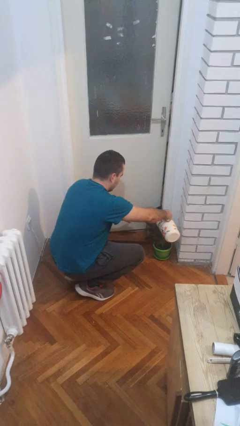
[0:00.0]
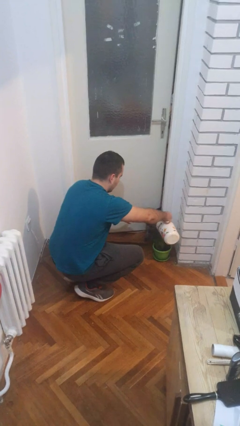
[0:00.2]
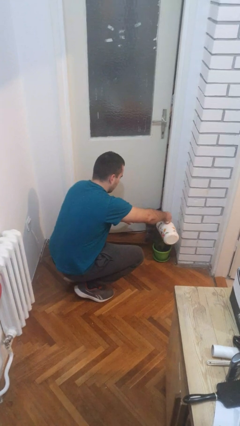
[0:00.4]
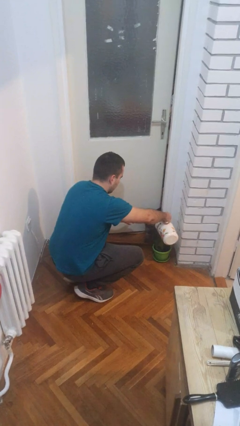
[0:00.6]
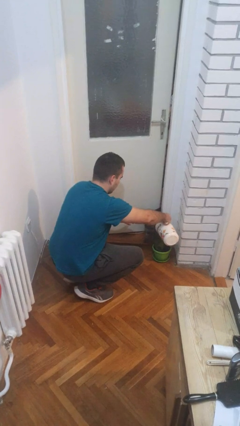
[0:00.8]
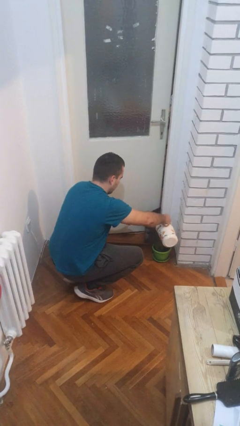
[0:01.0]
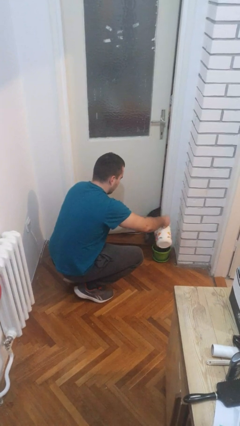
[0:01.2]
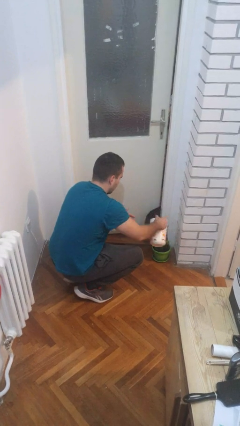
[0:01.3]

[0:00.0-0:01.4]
person waters houseplant

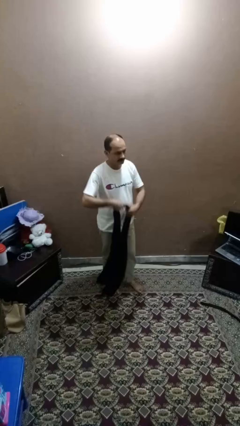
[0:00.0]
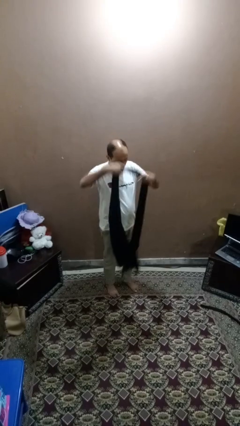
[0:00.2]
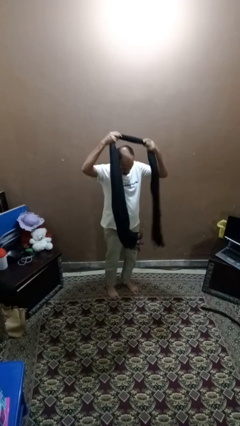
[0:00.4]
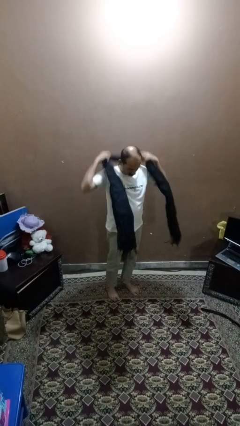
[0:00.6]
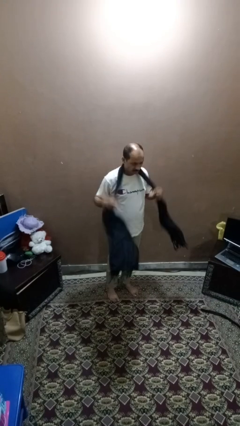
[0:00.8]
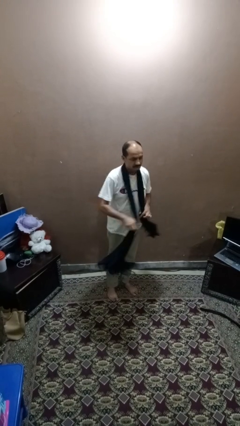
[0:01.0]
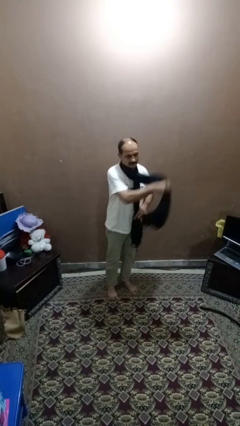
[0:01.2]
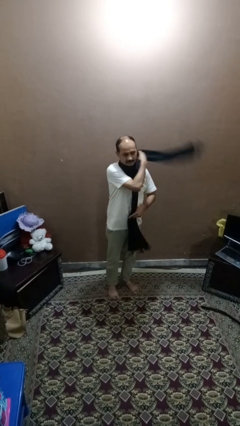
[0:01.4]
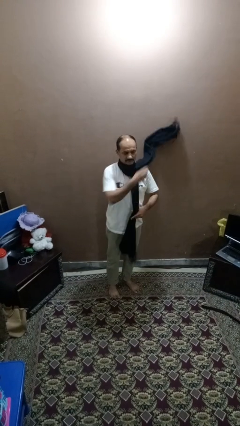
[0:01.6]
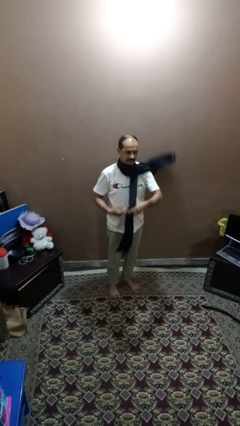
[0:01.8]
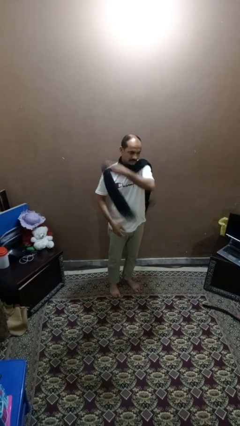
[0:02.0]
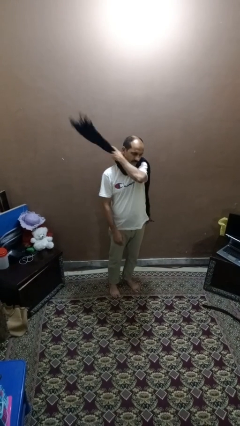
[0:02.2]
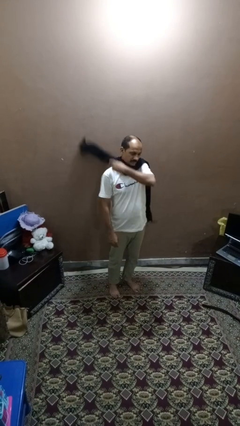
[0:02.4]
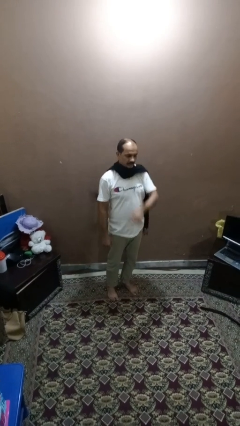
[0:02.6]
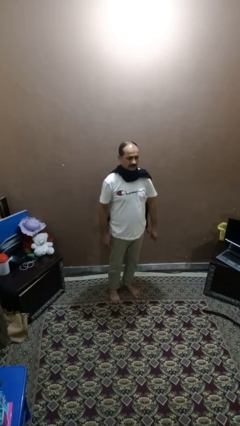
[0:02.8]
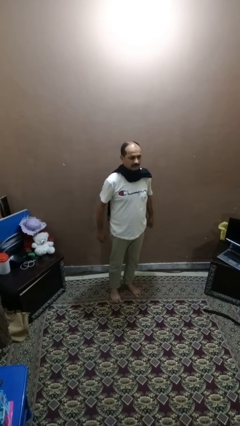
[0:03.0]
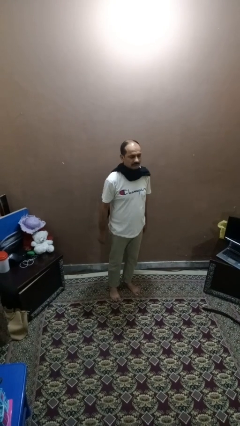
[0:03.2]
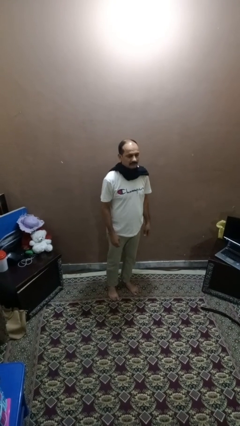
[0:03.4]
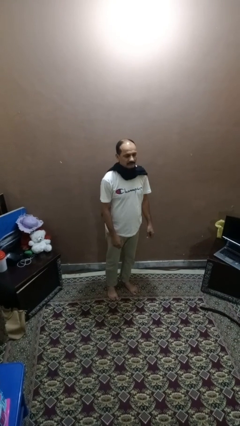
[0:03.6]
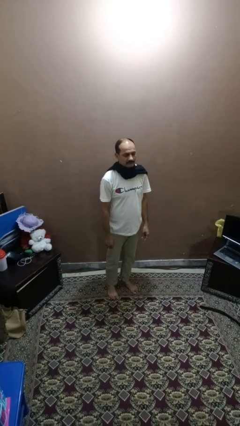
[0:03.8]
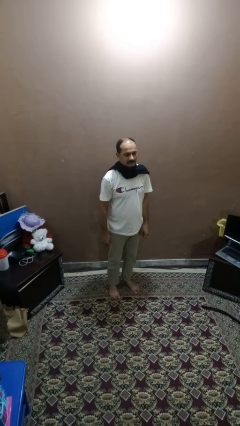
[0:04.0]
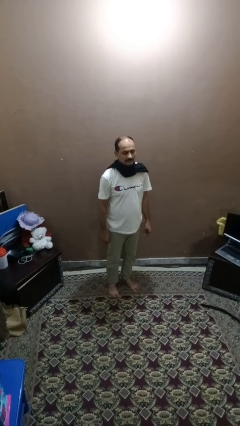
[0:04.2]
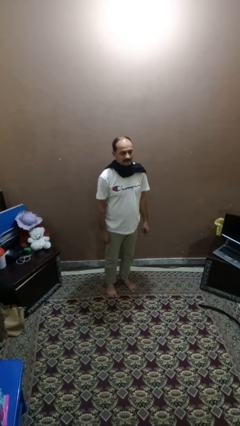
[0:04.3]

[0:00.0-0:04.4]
person puts on scarf

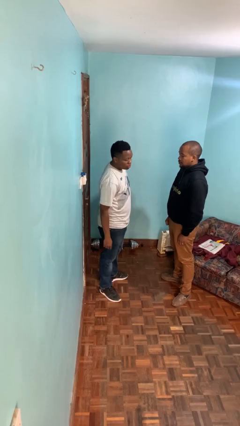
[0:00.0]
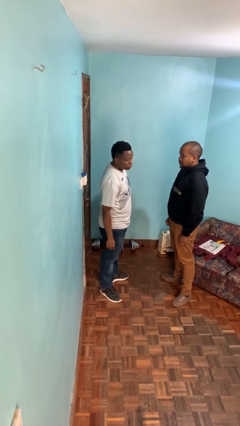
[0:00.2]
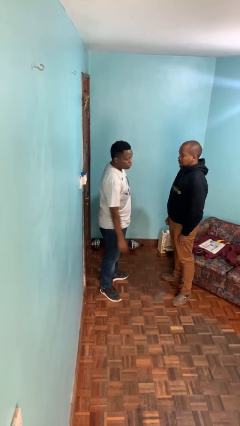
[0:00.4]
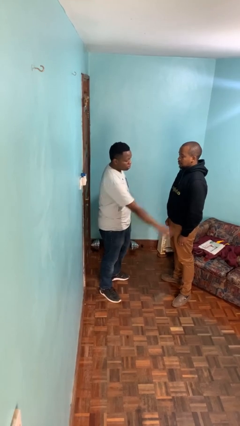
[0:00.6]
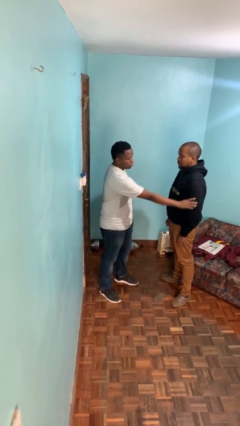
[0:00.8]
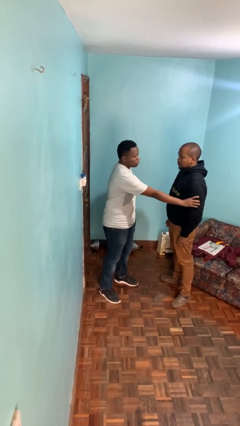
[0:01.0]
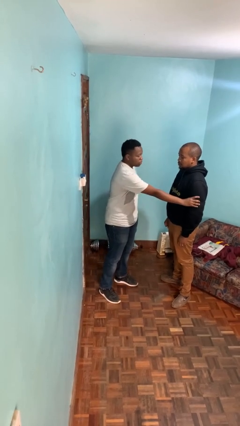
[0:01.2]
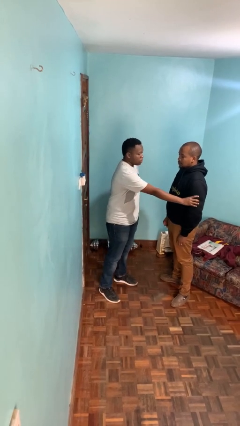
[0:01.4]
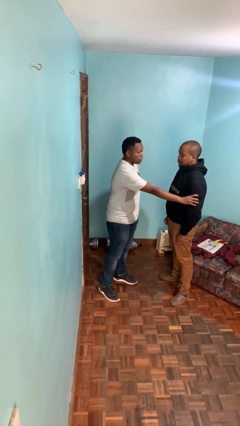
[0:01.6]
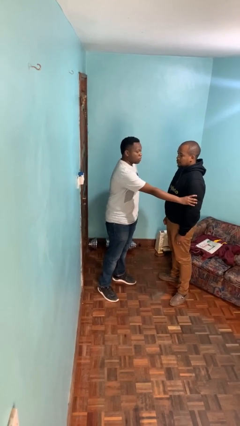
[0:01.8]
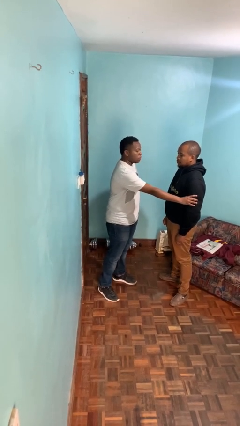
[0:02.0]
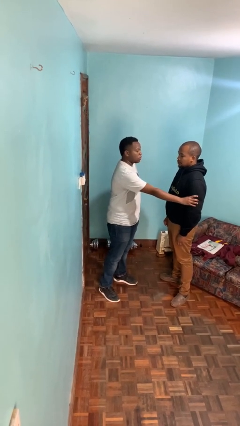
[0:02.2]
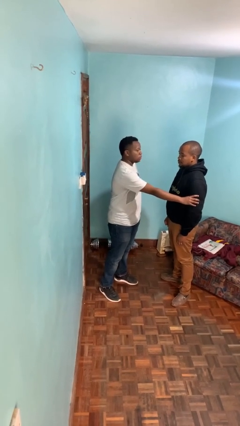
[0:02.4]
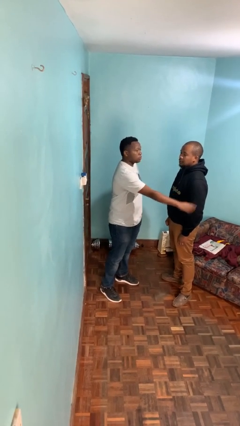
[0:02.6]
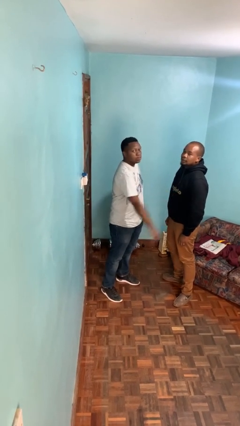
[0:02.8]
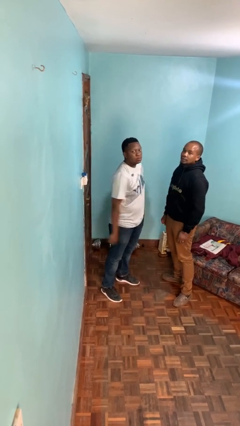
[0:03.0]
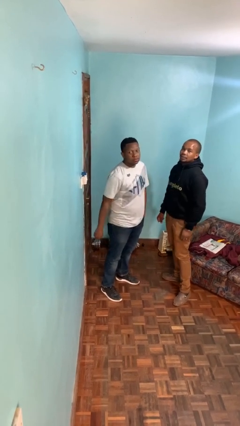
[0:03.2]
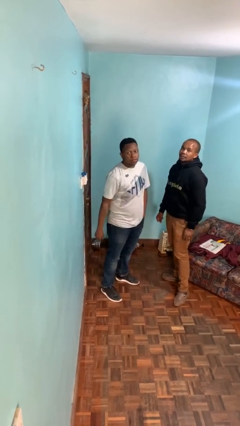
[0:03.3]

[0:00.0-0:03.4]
person grabs person by bicep

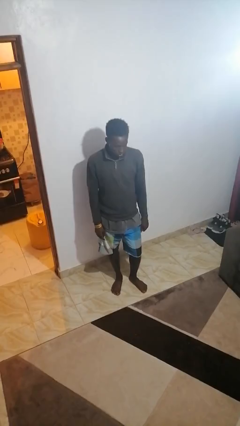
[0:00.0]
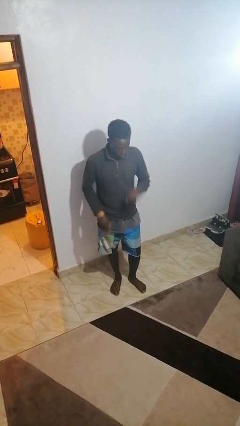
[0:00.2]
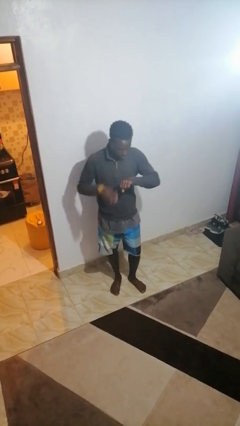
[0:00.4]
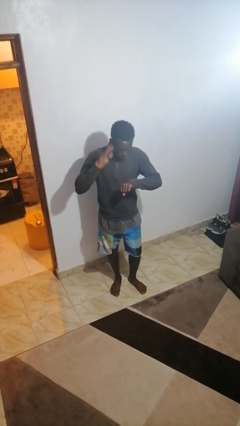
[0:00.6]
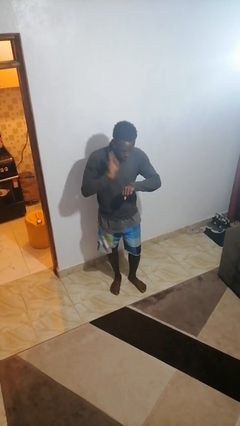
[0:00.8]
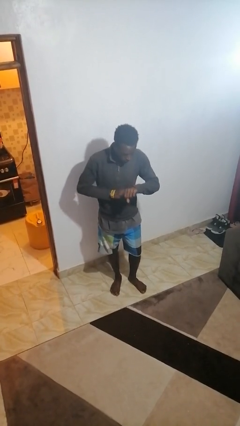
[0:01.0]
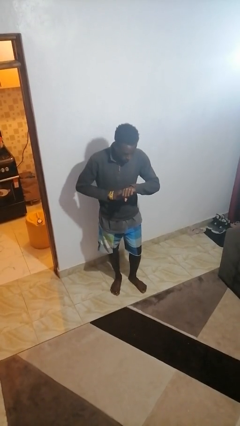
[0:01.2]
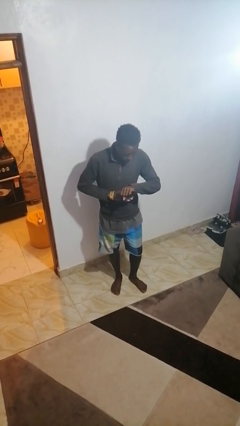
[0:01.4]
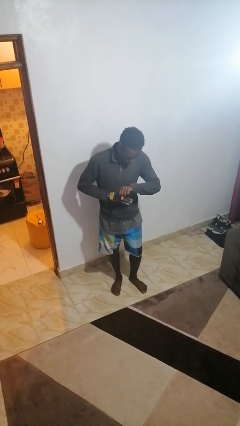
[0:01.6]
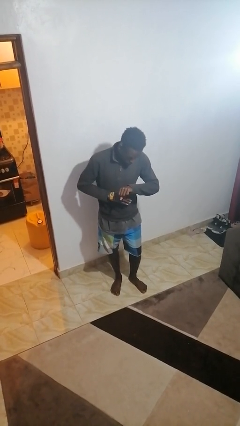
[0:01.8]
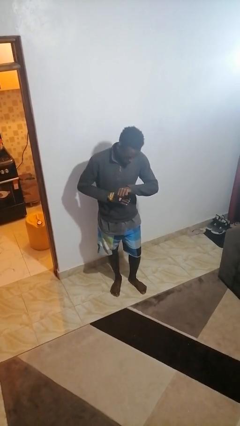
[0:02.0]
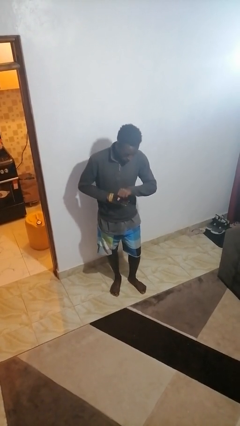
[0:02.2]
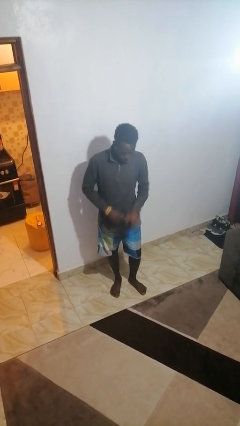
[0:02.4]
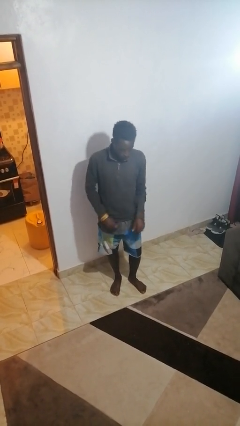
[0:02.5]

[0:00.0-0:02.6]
person swats bug

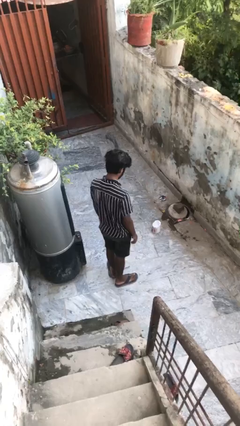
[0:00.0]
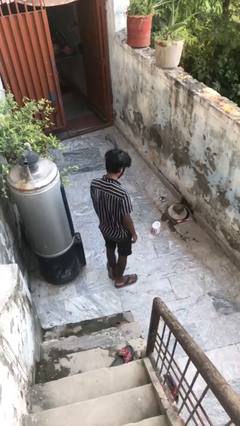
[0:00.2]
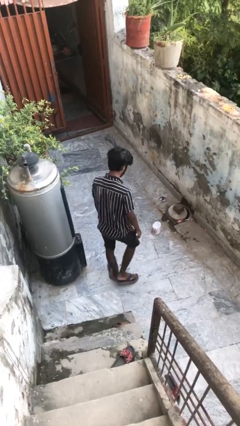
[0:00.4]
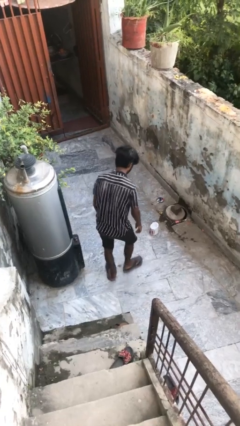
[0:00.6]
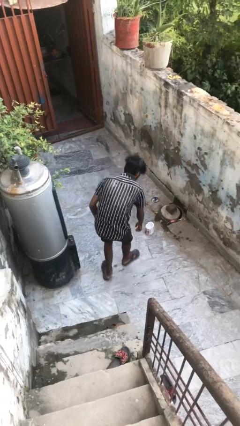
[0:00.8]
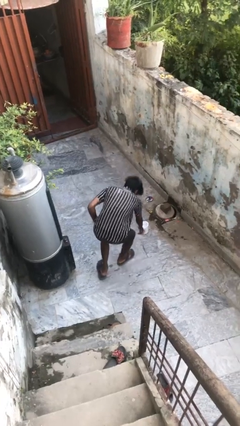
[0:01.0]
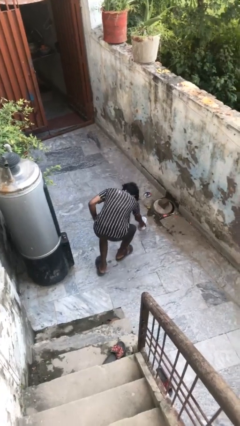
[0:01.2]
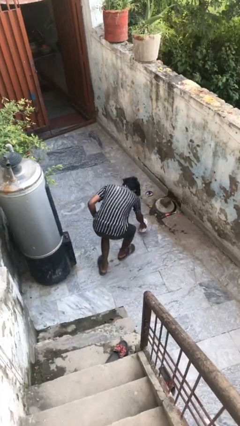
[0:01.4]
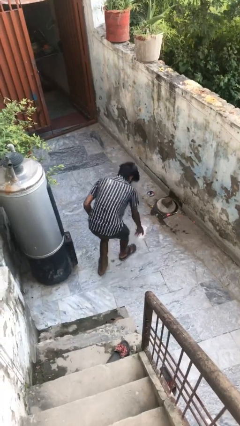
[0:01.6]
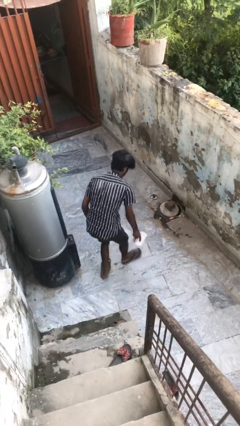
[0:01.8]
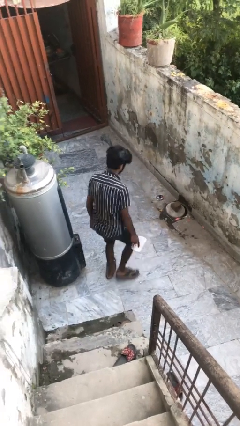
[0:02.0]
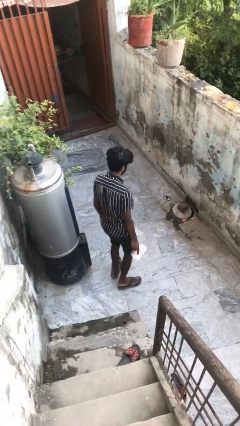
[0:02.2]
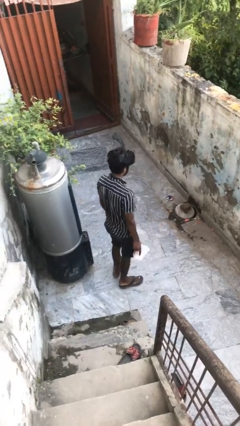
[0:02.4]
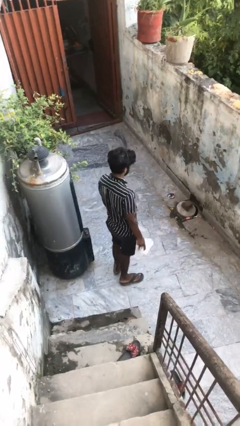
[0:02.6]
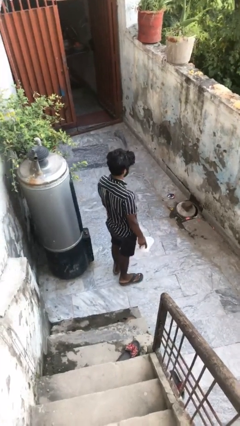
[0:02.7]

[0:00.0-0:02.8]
person picks up object from floor

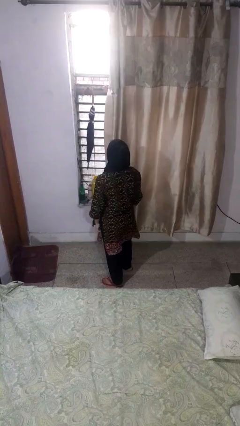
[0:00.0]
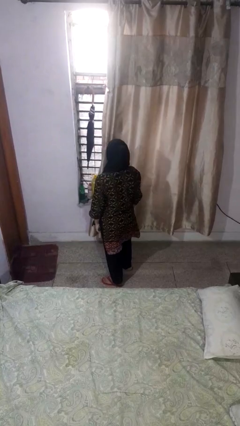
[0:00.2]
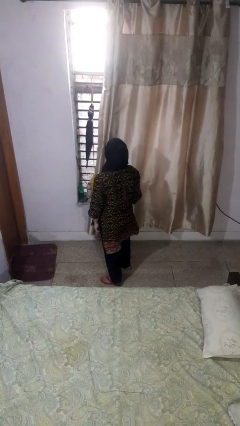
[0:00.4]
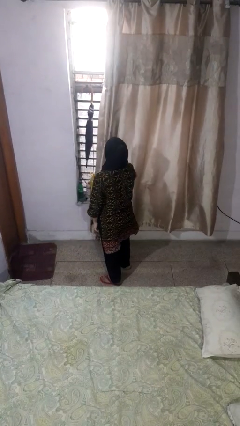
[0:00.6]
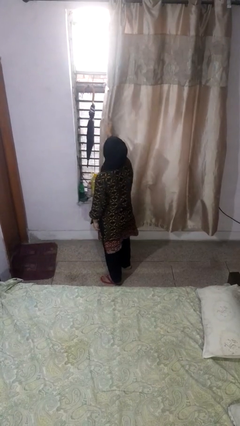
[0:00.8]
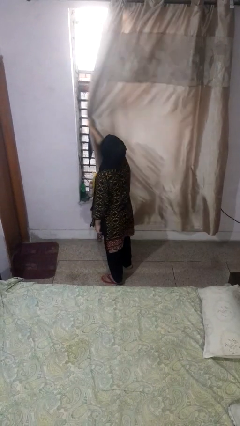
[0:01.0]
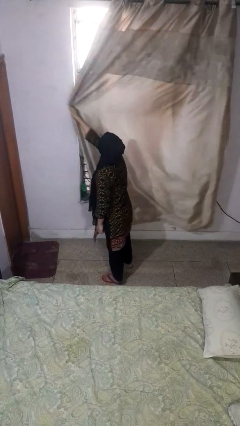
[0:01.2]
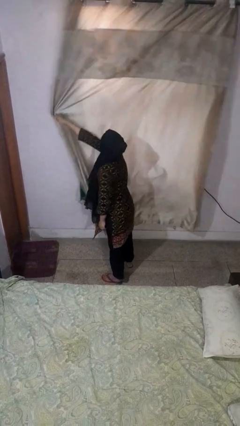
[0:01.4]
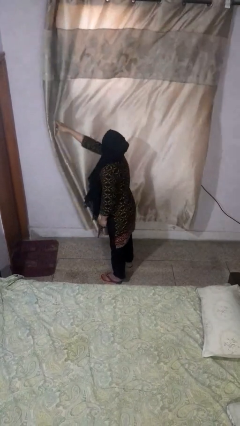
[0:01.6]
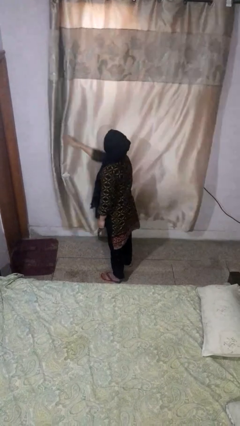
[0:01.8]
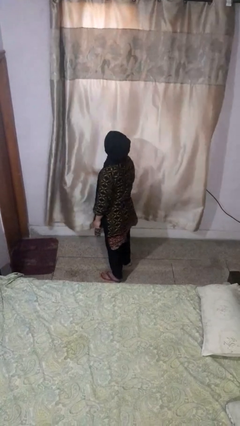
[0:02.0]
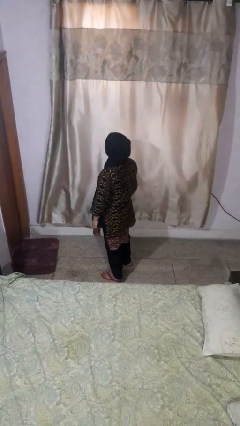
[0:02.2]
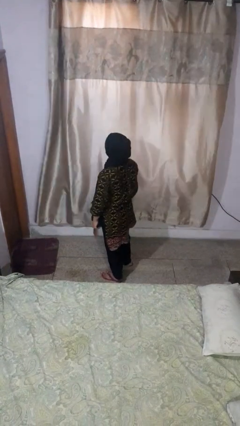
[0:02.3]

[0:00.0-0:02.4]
person closes curtains

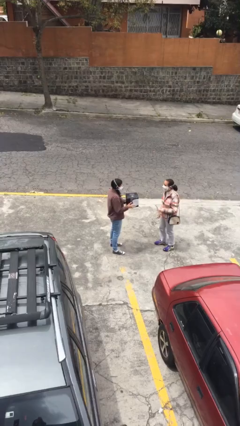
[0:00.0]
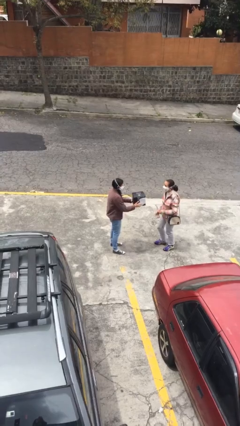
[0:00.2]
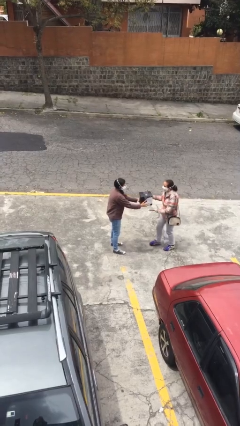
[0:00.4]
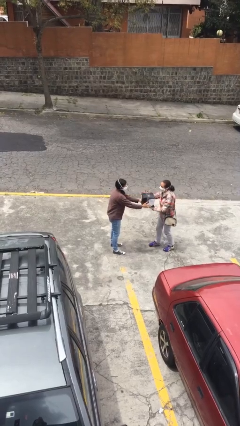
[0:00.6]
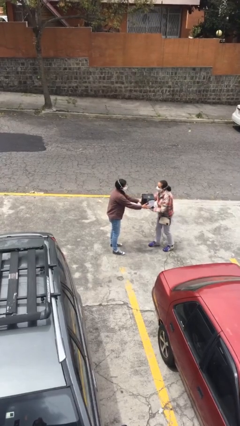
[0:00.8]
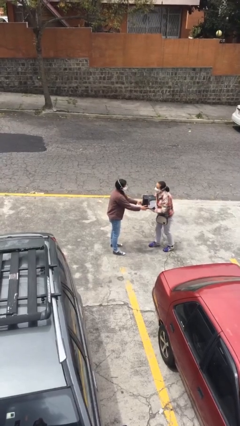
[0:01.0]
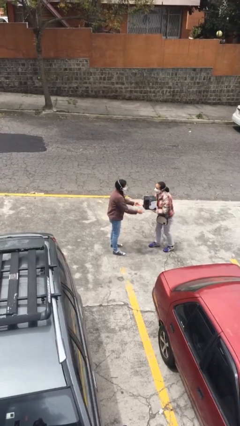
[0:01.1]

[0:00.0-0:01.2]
person transfers object to person
